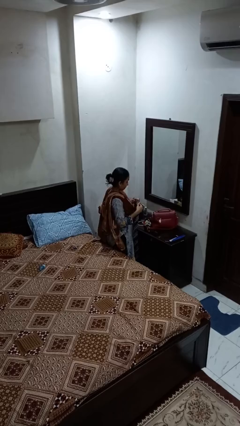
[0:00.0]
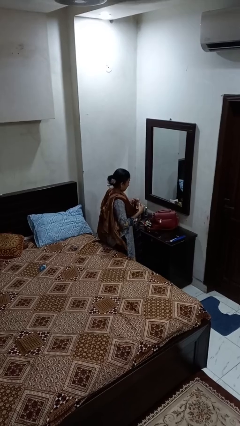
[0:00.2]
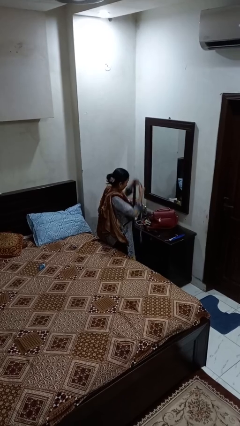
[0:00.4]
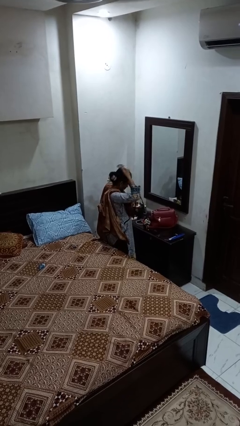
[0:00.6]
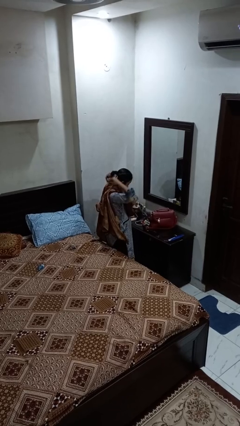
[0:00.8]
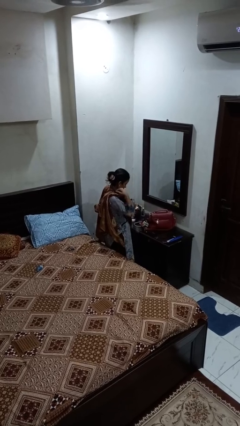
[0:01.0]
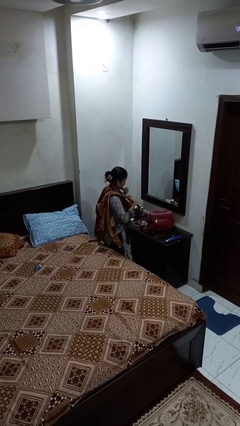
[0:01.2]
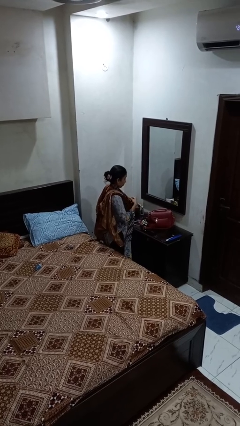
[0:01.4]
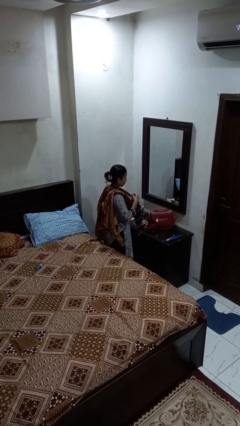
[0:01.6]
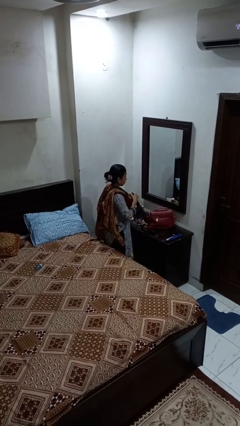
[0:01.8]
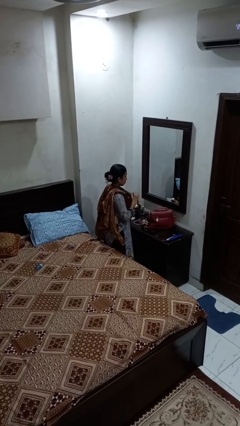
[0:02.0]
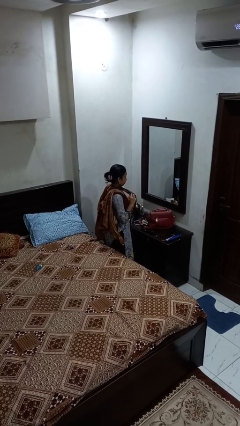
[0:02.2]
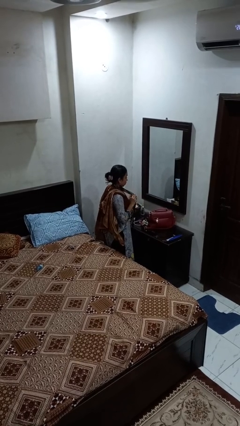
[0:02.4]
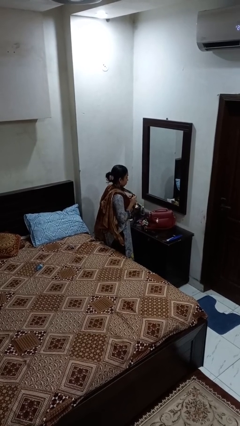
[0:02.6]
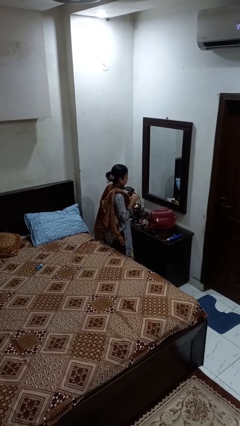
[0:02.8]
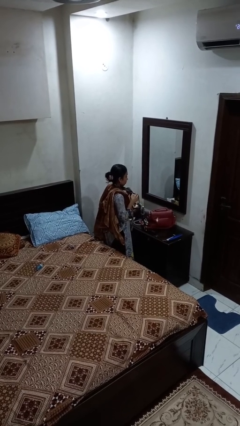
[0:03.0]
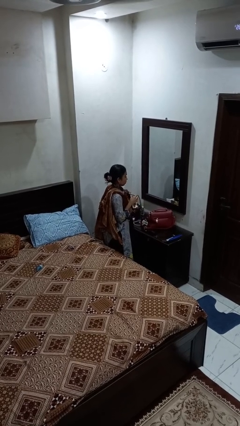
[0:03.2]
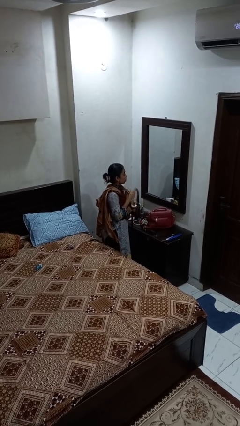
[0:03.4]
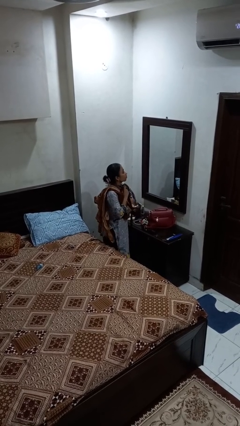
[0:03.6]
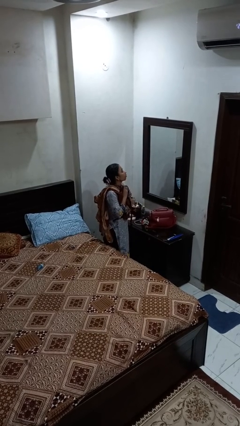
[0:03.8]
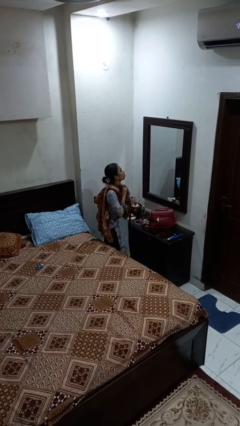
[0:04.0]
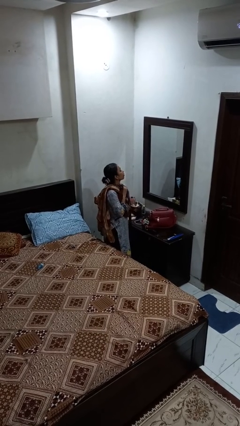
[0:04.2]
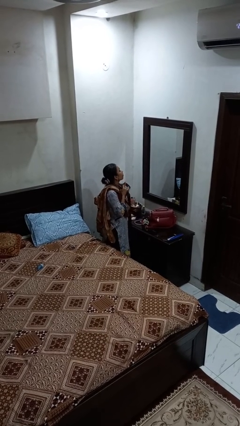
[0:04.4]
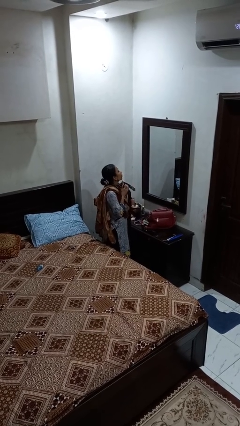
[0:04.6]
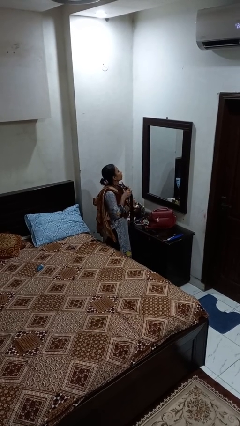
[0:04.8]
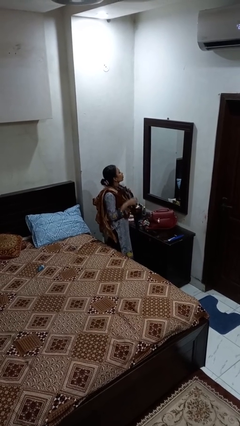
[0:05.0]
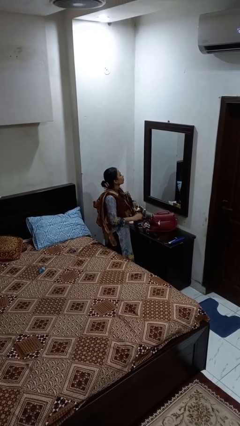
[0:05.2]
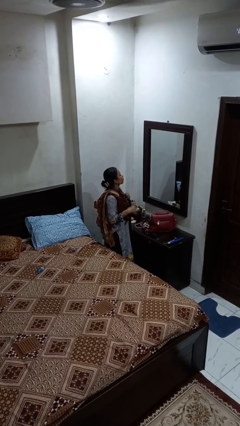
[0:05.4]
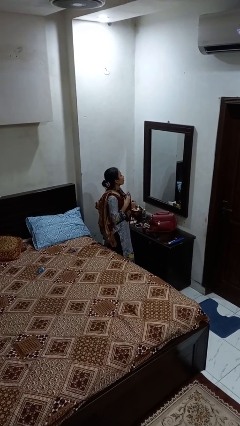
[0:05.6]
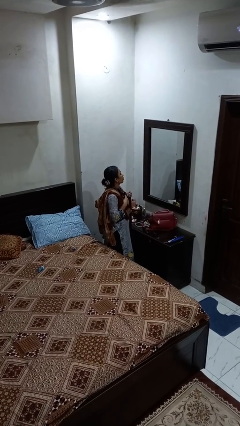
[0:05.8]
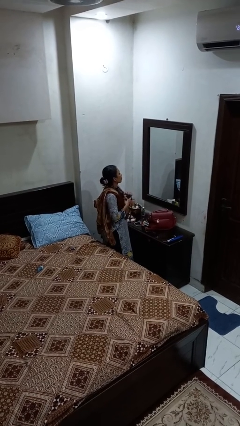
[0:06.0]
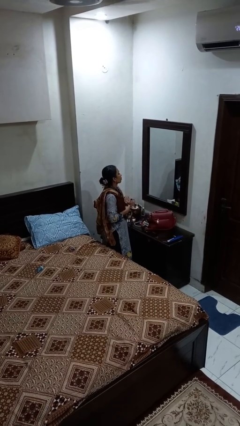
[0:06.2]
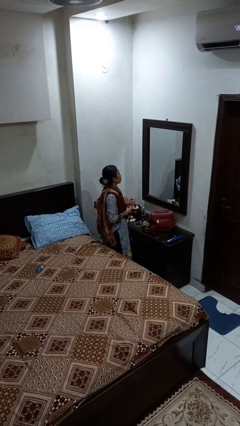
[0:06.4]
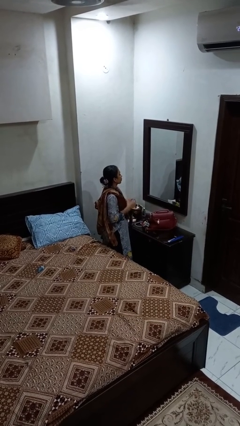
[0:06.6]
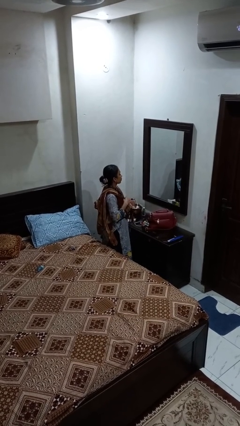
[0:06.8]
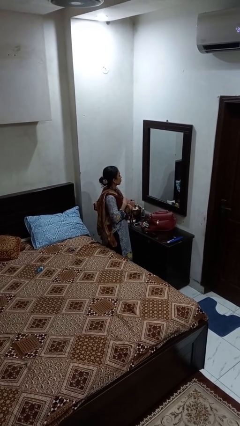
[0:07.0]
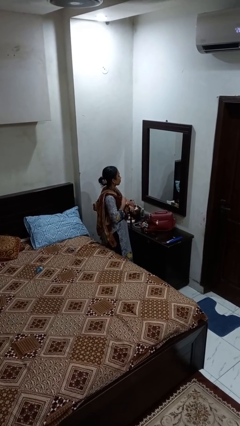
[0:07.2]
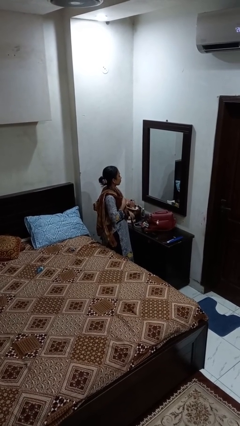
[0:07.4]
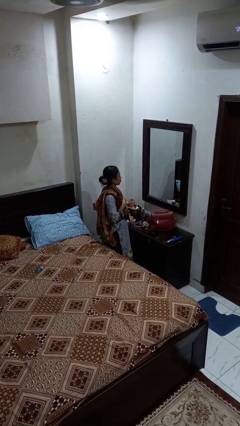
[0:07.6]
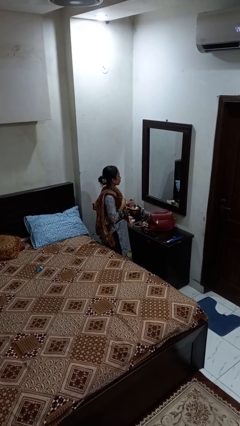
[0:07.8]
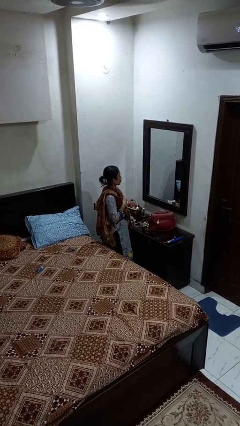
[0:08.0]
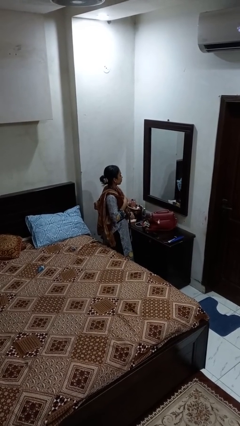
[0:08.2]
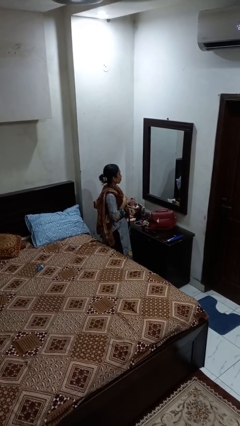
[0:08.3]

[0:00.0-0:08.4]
person puts on necktie

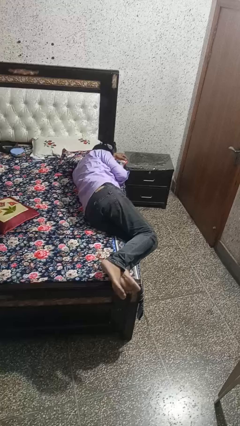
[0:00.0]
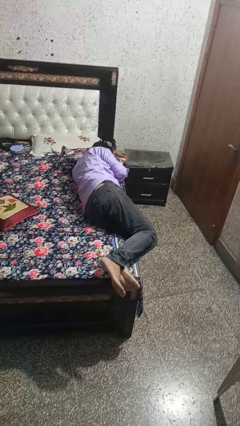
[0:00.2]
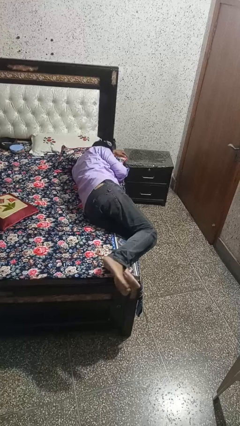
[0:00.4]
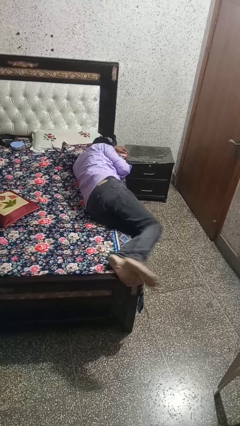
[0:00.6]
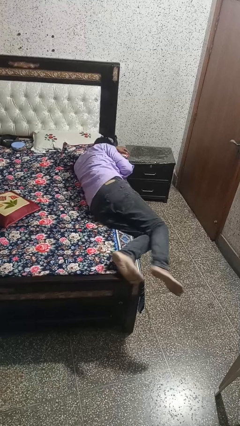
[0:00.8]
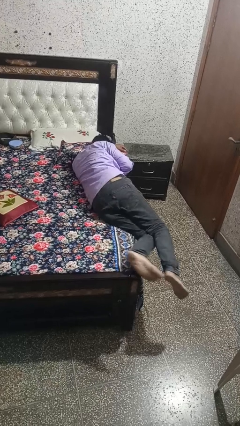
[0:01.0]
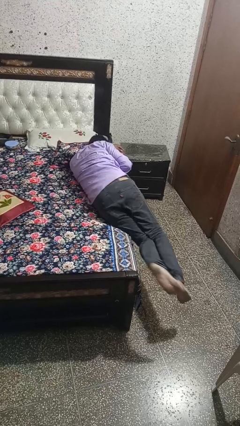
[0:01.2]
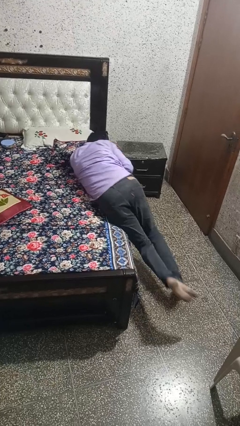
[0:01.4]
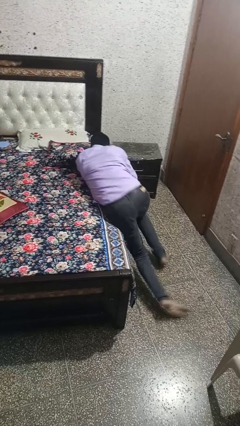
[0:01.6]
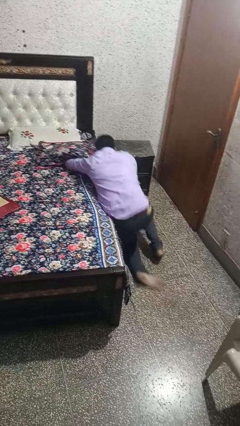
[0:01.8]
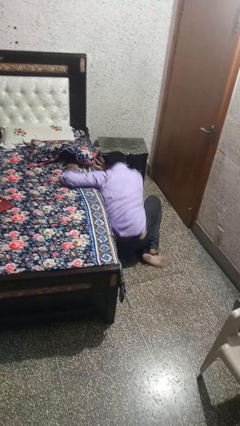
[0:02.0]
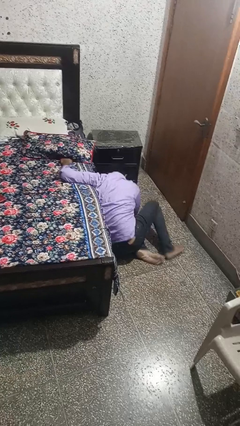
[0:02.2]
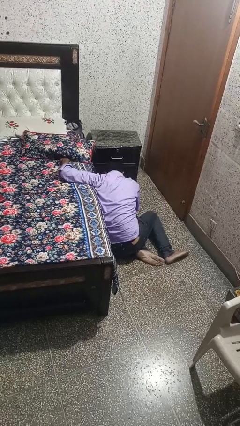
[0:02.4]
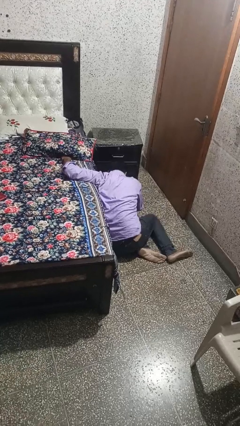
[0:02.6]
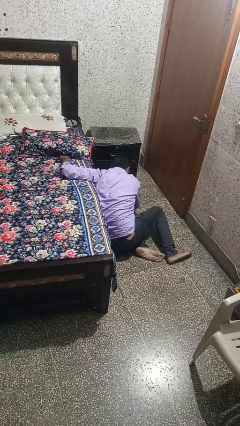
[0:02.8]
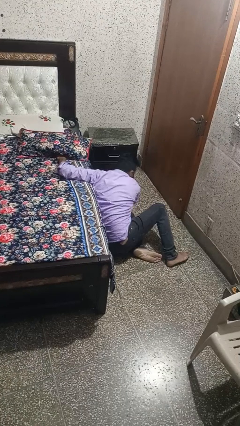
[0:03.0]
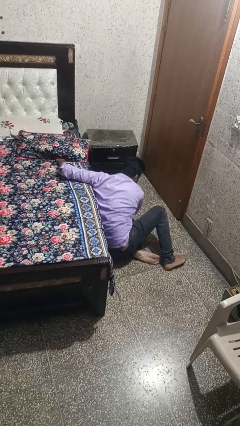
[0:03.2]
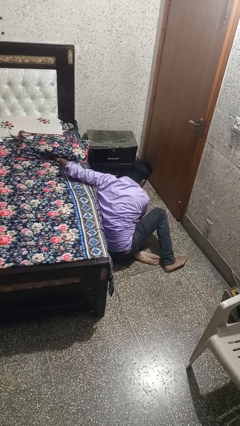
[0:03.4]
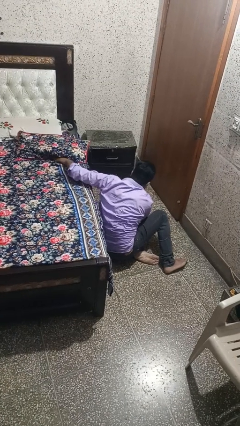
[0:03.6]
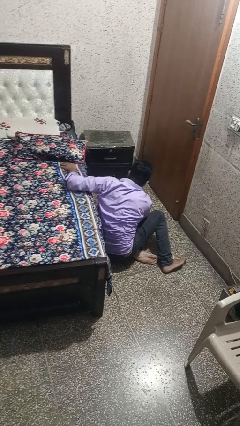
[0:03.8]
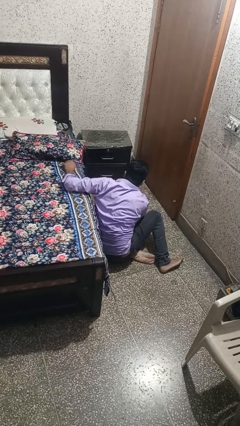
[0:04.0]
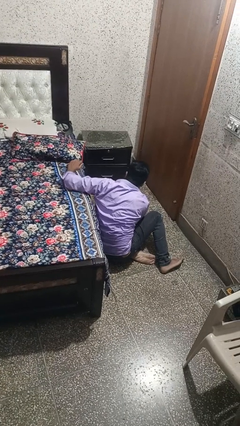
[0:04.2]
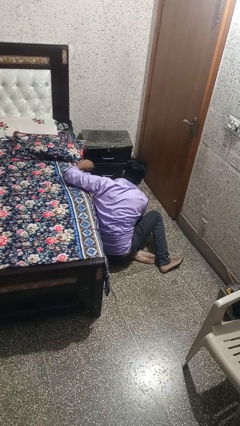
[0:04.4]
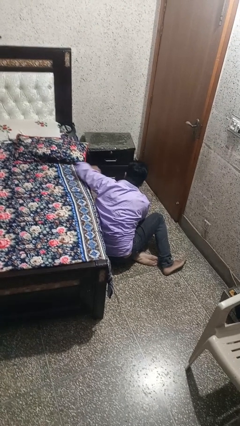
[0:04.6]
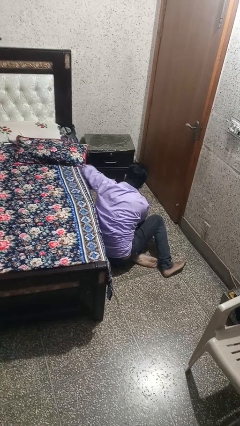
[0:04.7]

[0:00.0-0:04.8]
person falls from bed

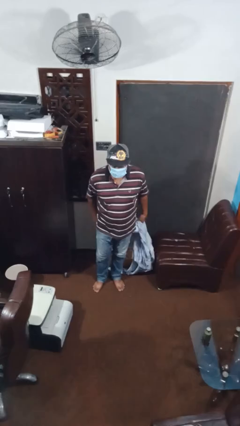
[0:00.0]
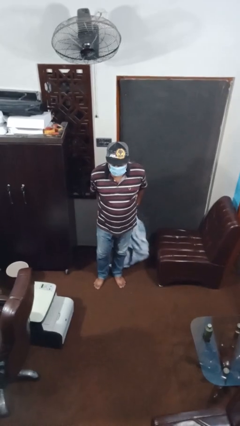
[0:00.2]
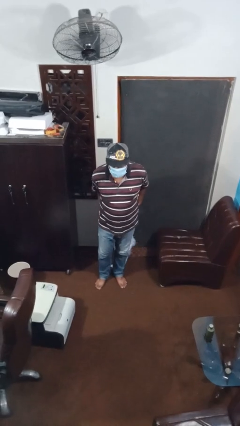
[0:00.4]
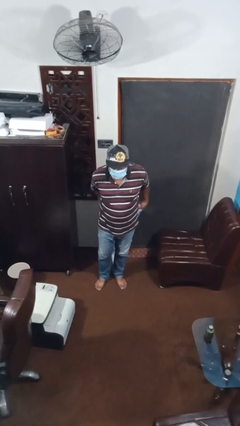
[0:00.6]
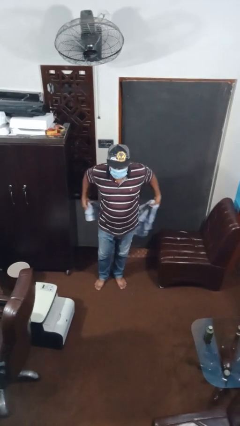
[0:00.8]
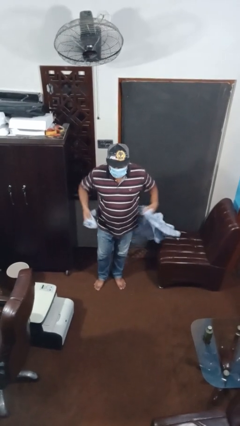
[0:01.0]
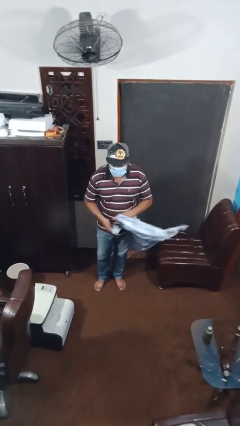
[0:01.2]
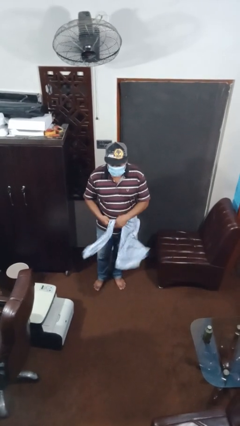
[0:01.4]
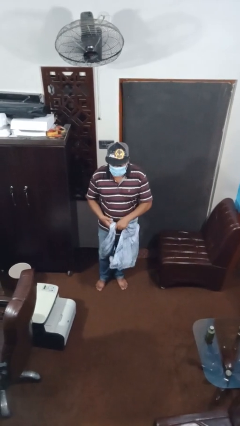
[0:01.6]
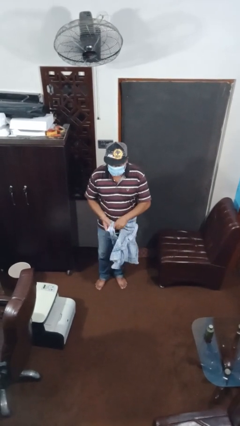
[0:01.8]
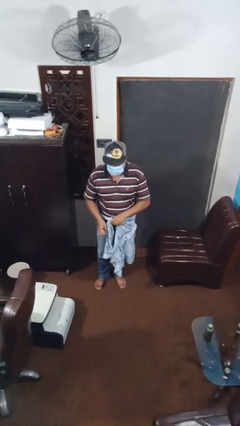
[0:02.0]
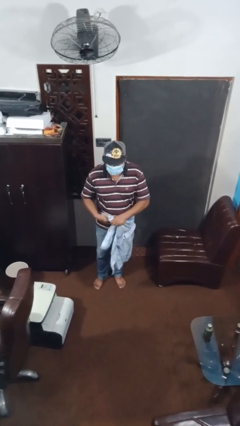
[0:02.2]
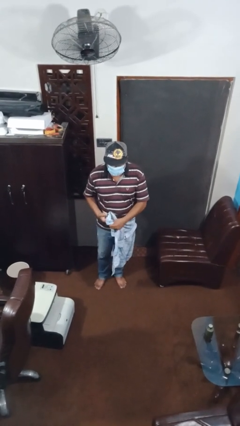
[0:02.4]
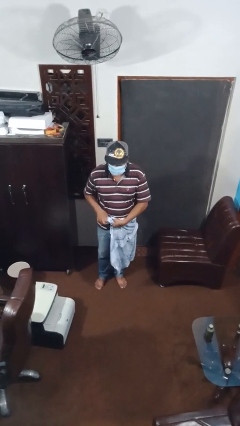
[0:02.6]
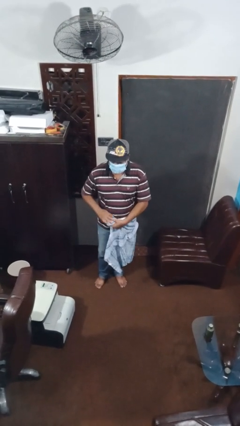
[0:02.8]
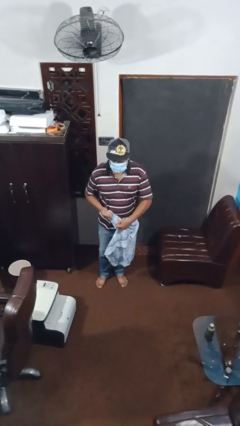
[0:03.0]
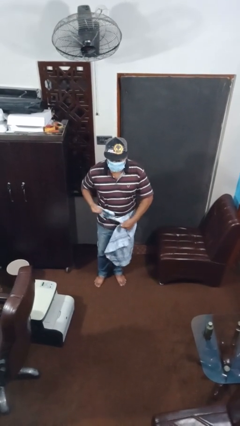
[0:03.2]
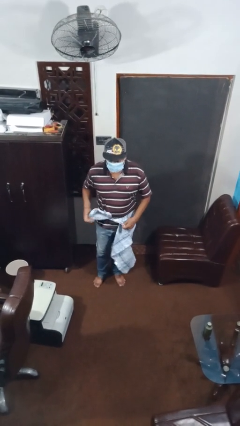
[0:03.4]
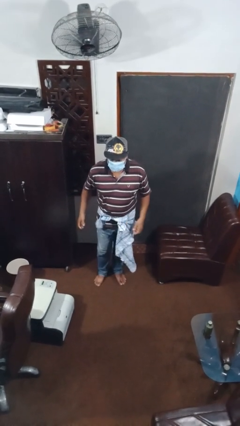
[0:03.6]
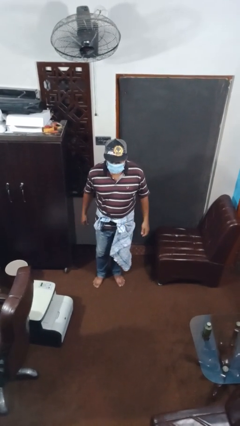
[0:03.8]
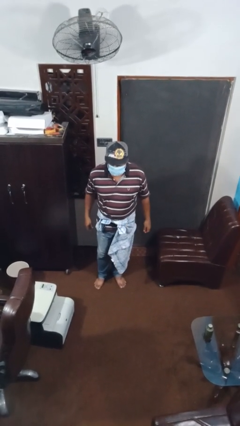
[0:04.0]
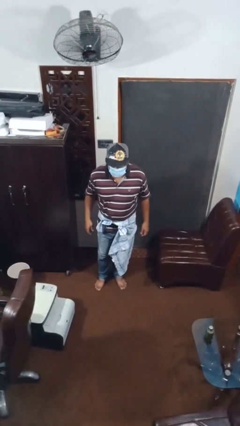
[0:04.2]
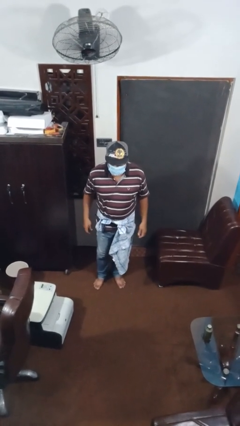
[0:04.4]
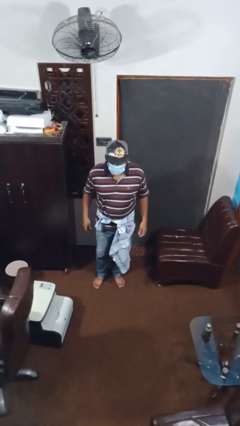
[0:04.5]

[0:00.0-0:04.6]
person ties jacket around waist
